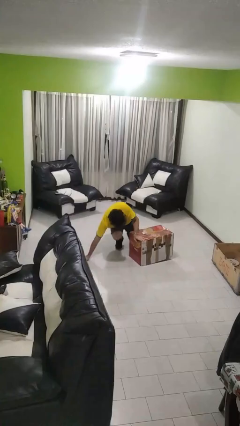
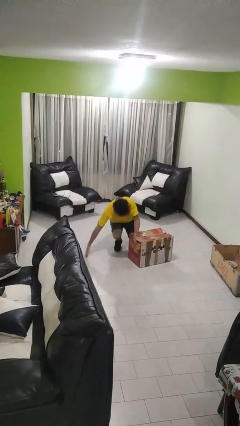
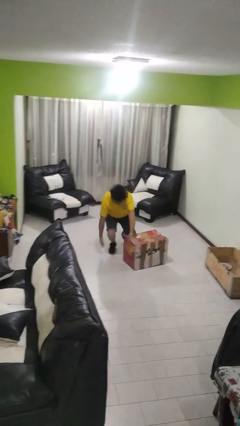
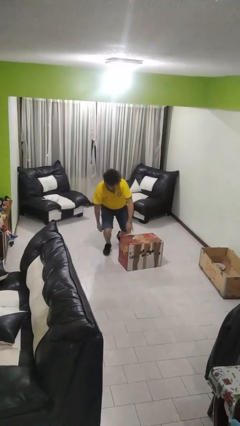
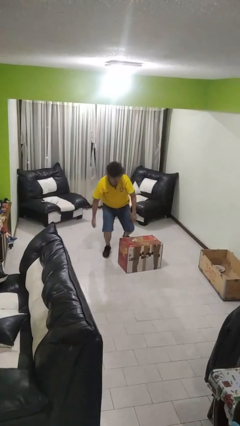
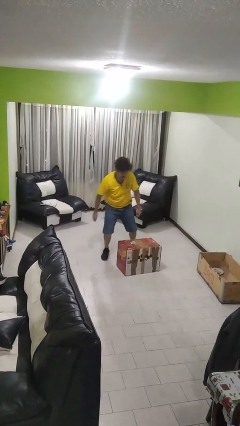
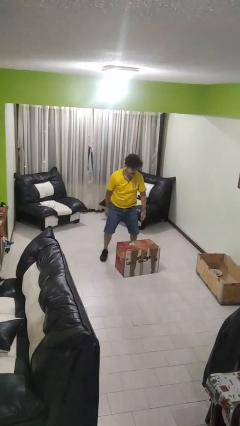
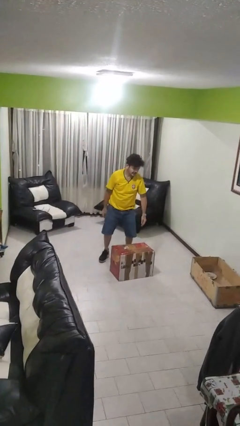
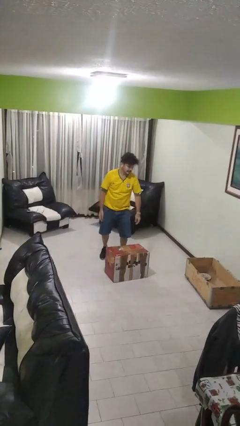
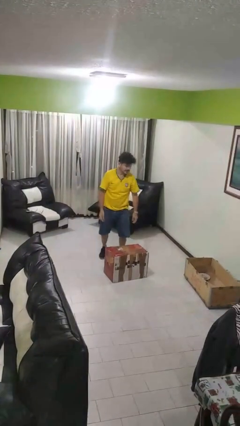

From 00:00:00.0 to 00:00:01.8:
person stands up from floor

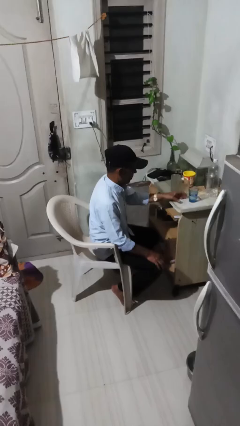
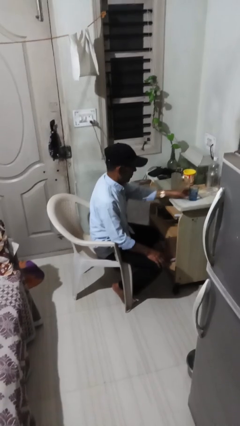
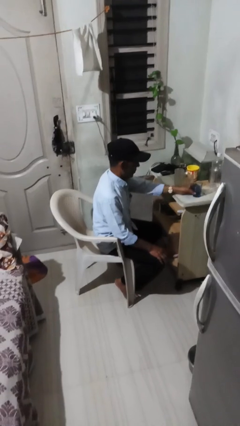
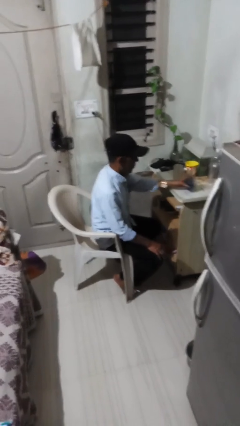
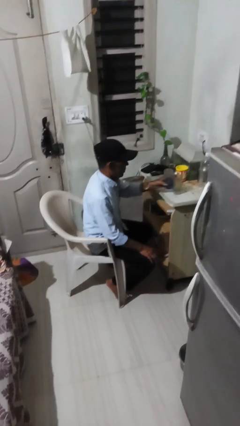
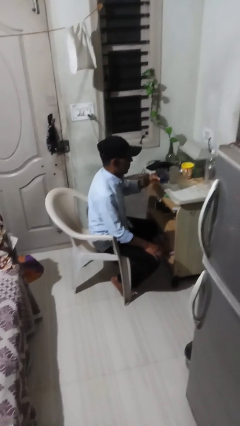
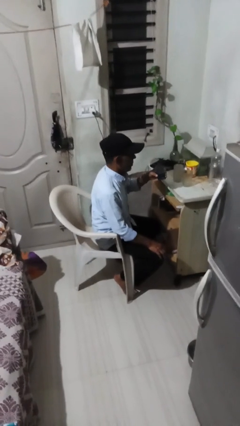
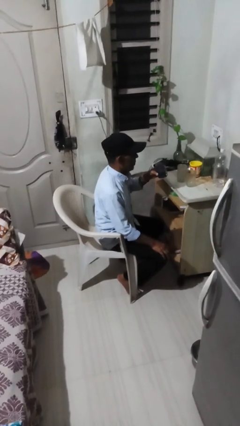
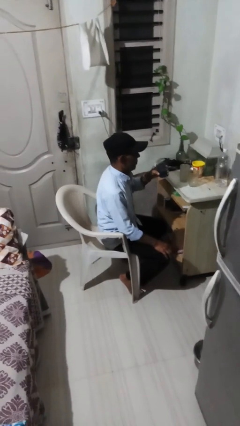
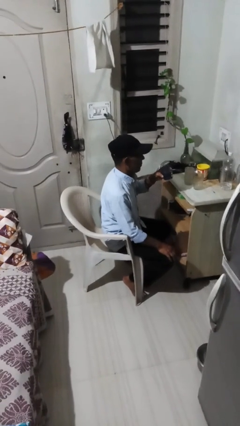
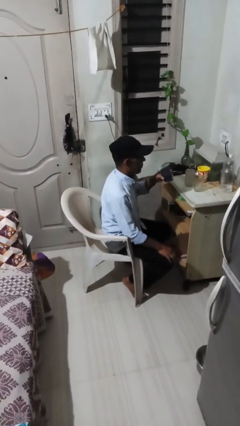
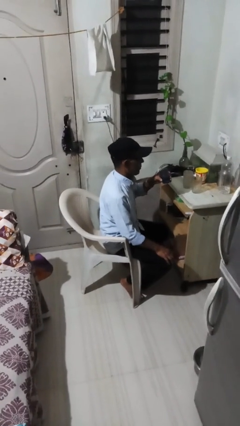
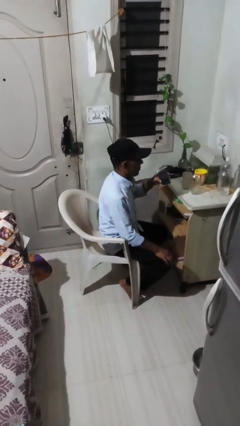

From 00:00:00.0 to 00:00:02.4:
person picks up object from table

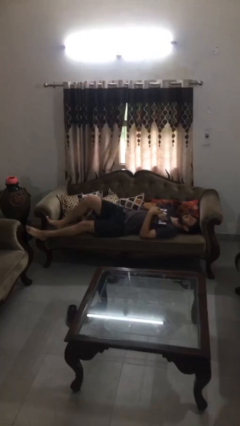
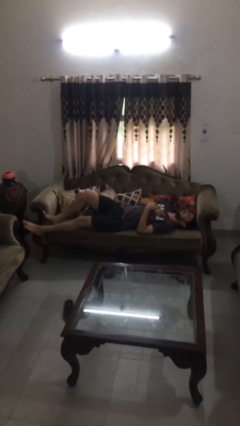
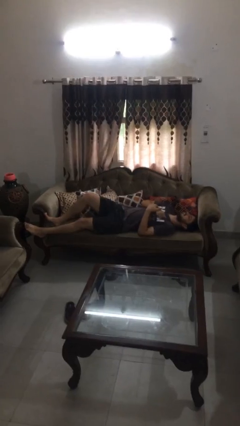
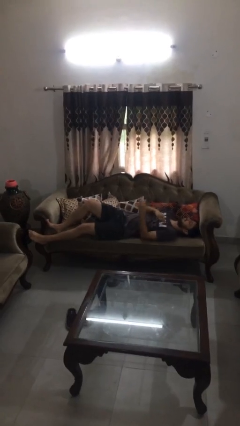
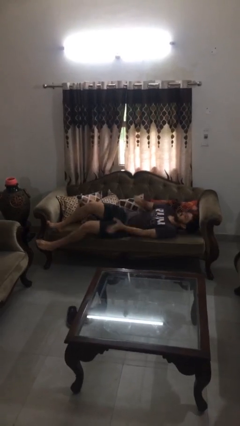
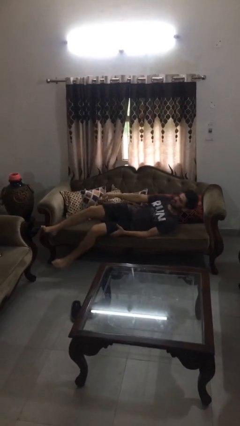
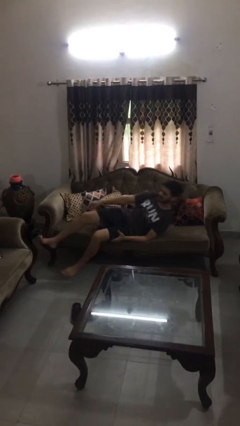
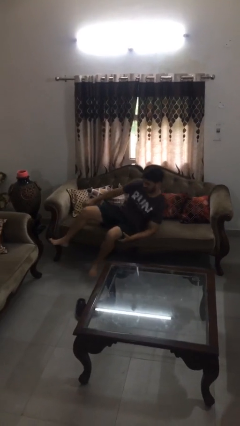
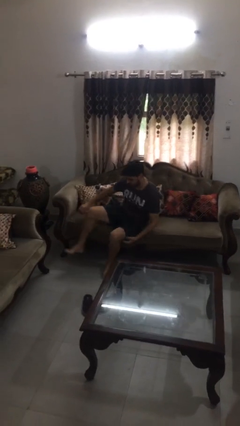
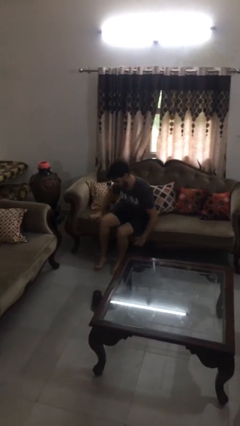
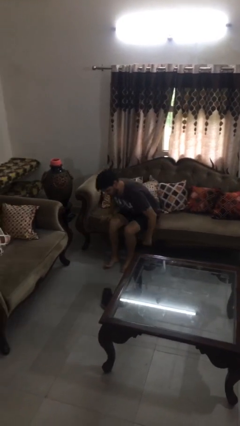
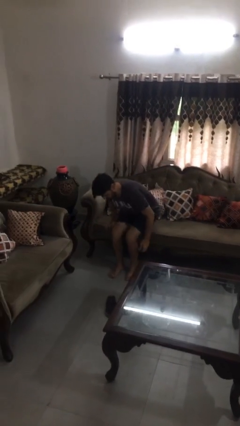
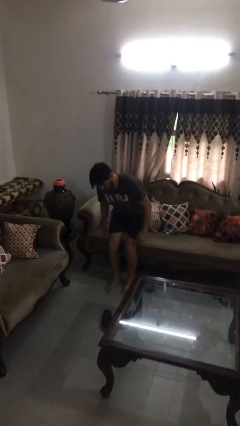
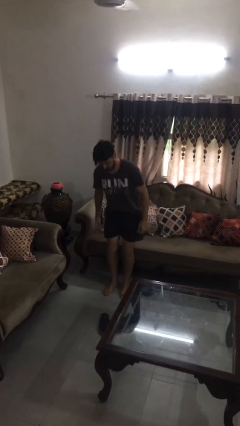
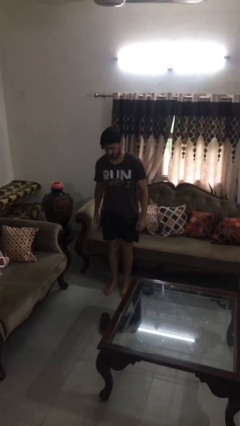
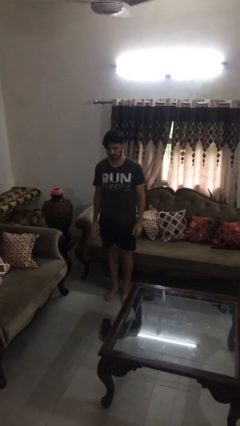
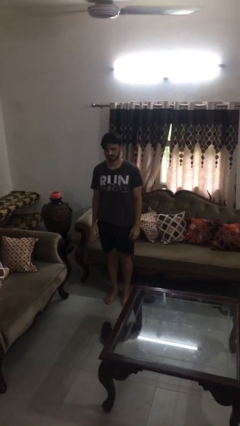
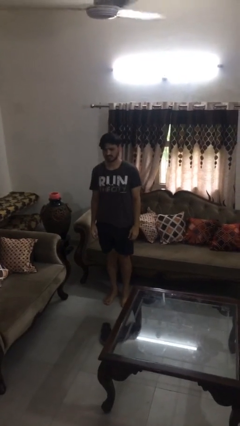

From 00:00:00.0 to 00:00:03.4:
person stands up

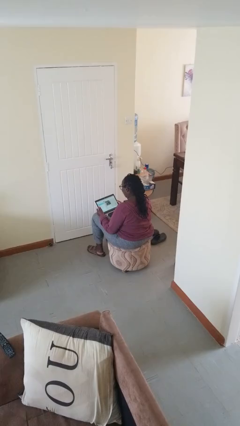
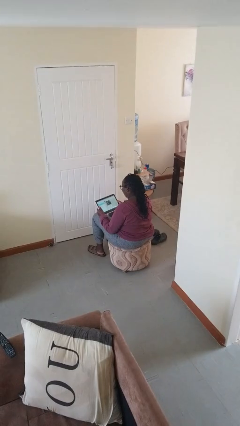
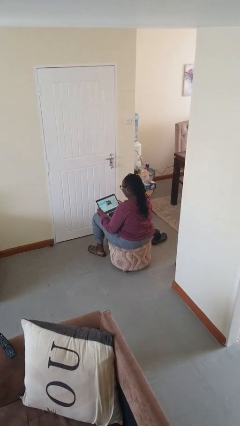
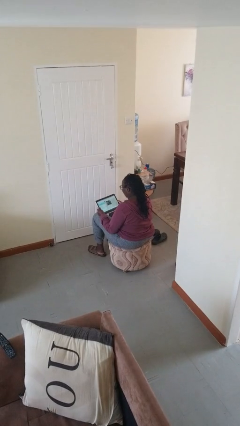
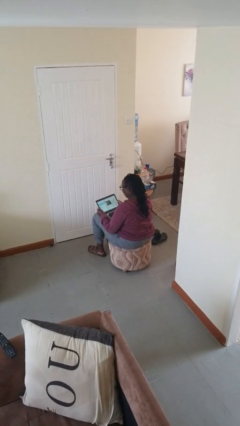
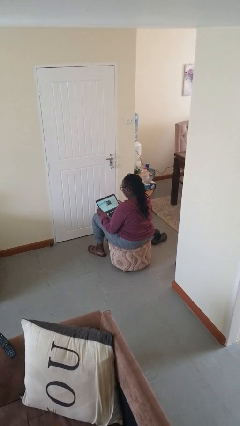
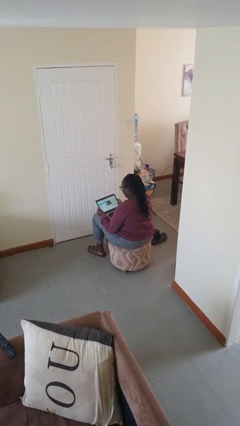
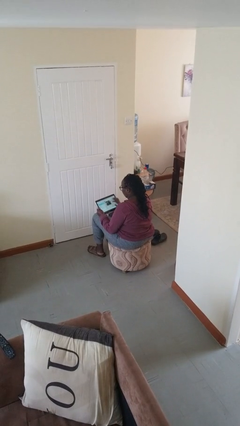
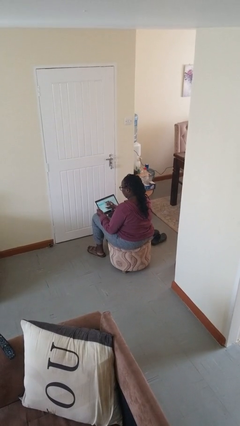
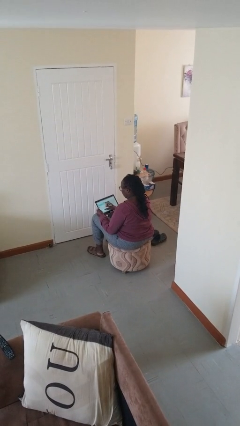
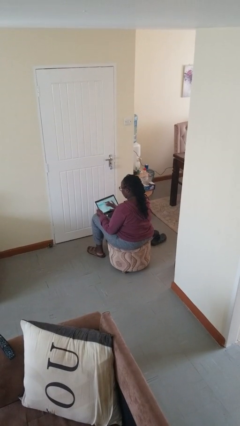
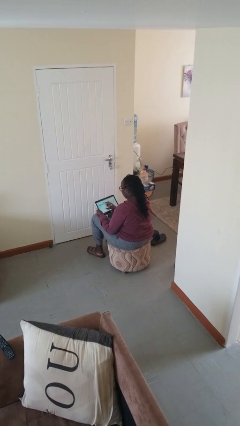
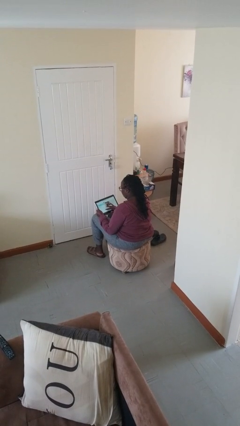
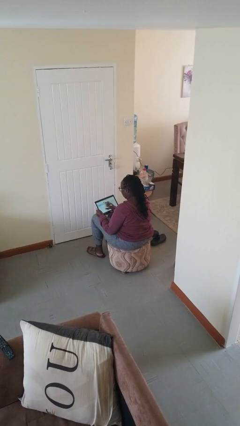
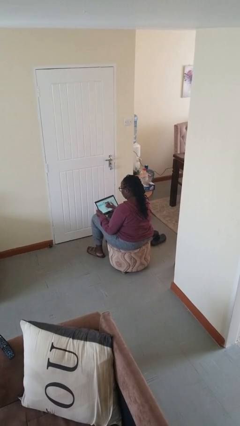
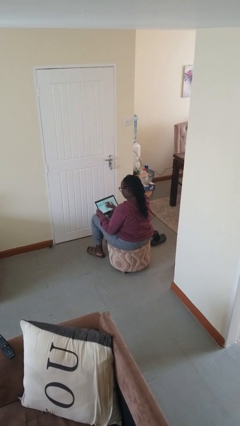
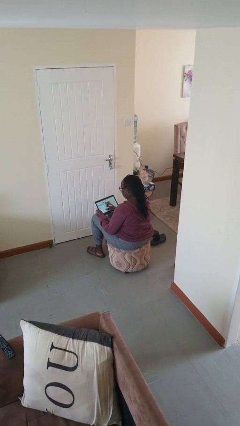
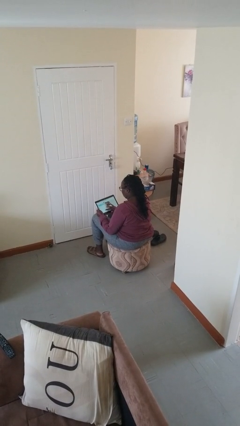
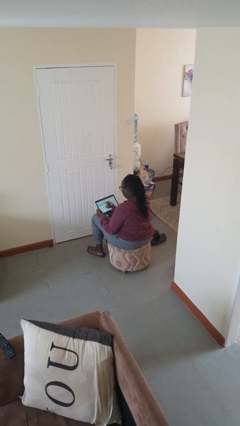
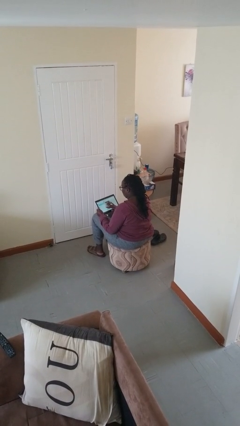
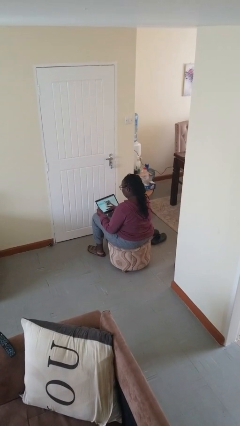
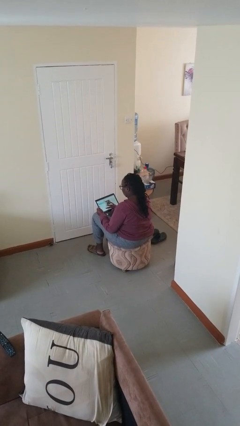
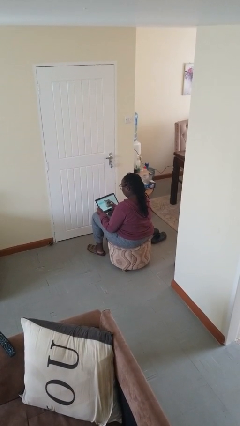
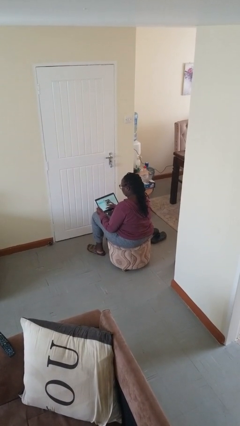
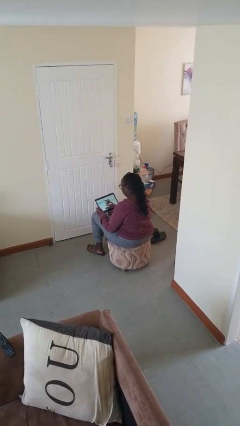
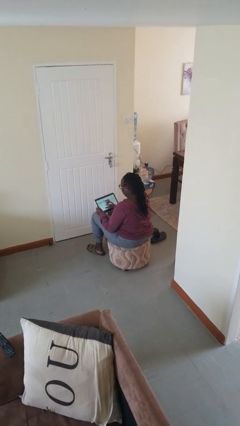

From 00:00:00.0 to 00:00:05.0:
person interacts with tablet

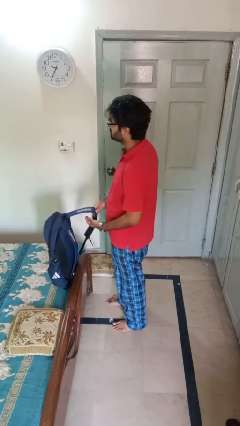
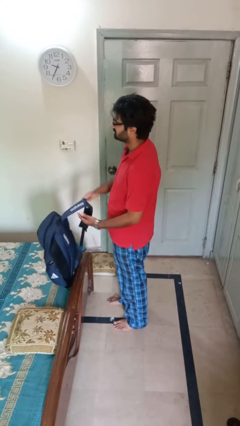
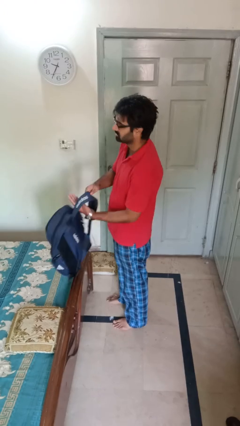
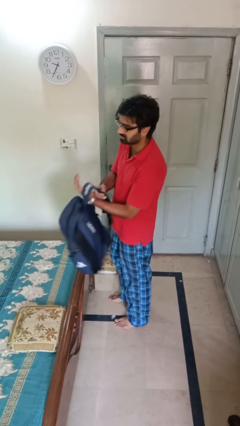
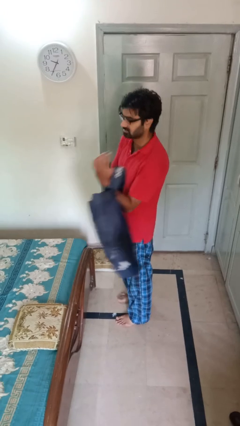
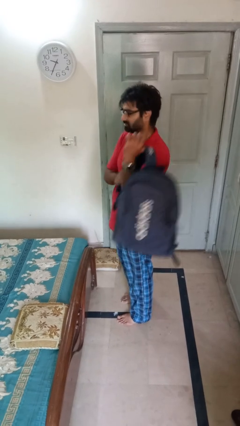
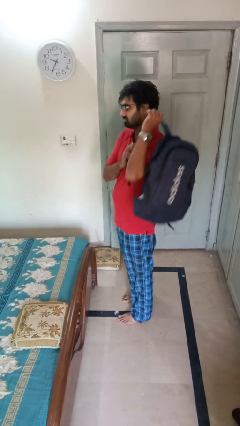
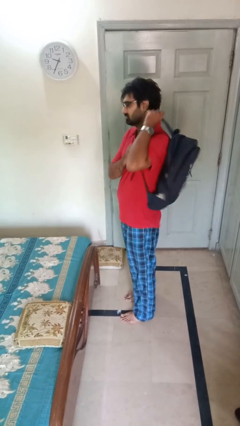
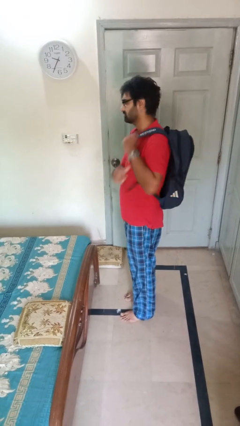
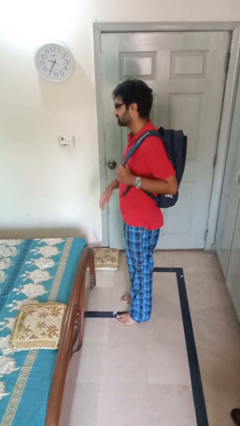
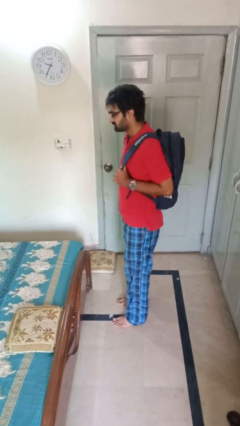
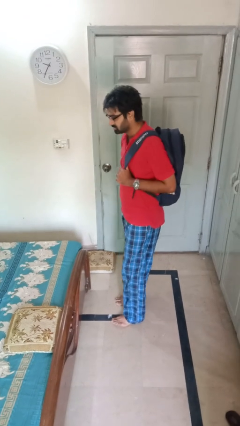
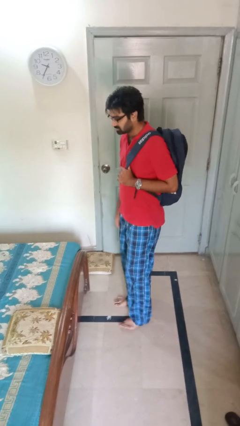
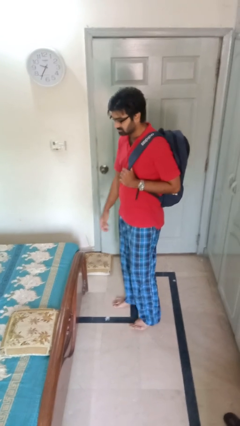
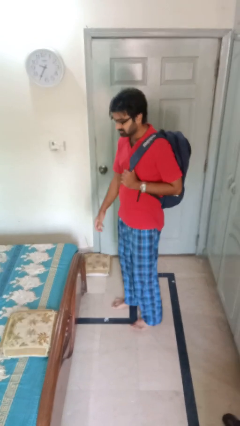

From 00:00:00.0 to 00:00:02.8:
person puts on backpack

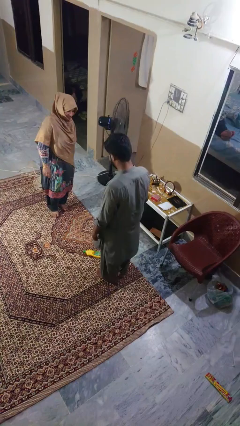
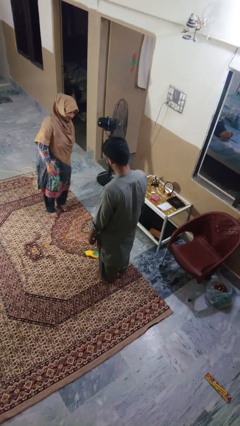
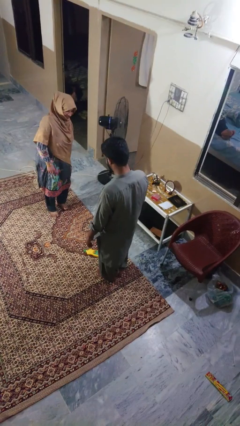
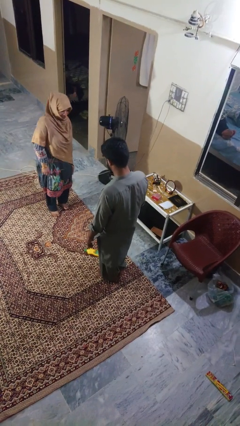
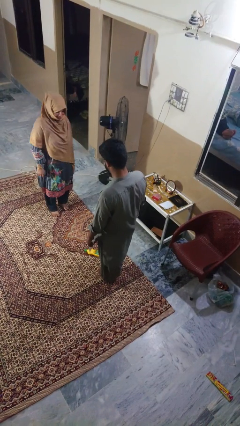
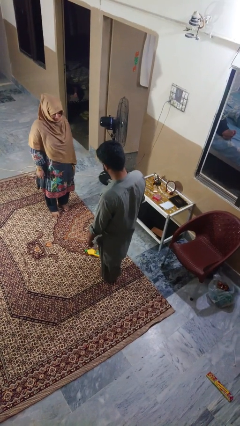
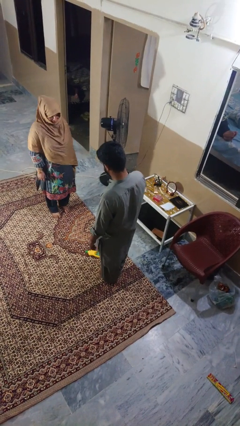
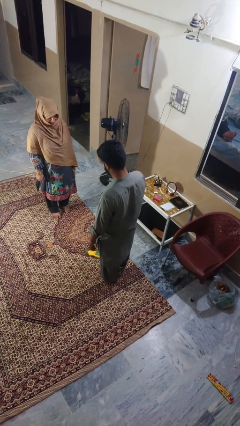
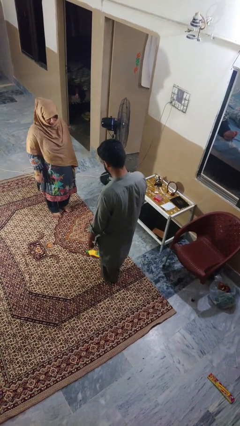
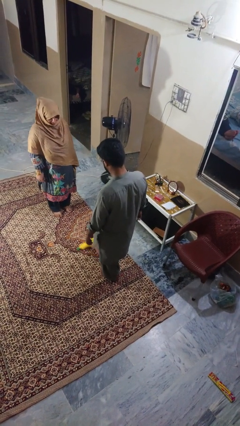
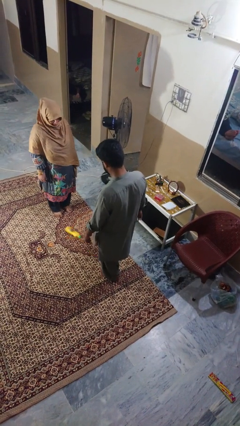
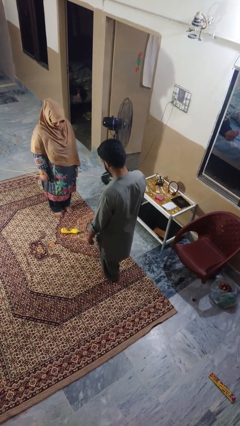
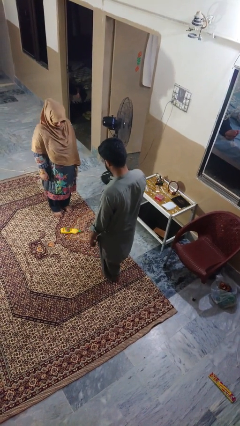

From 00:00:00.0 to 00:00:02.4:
person kicks object to person
